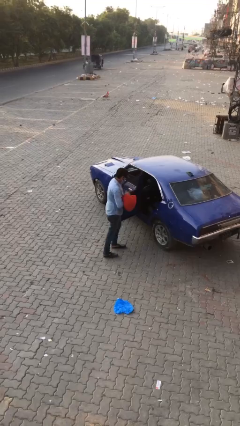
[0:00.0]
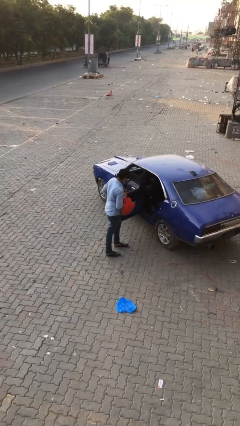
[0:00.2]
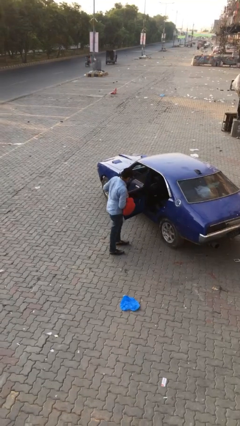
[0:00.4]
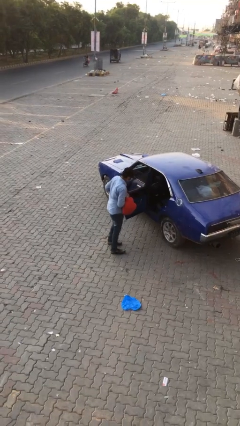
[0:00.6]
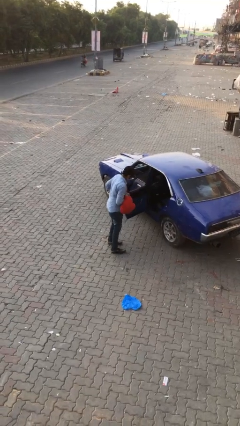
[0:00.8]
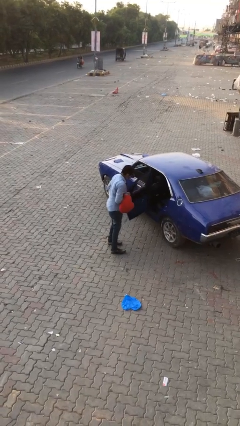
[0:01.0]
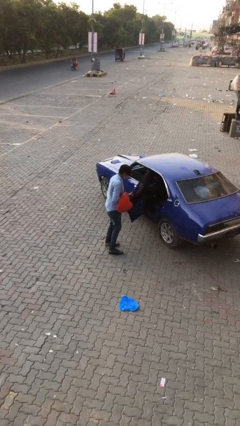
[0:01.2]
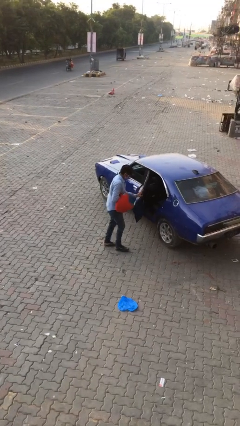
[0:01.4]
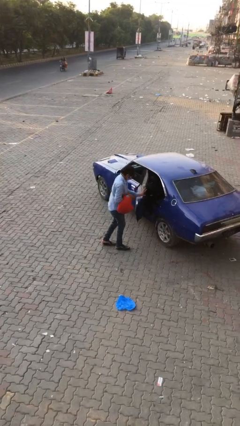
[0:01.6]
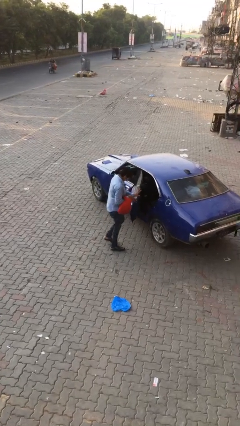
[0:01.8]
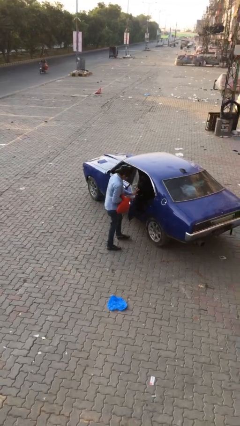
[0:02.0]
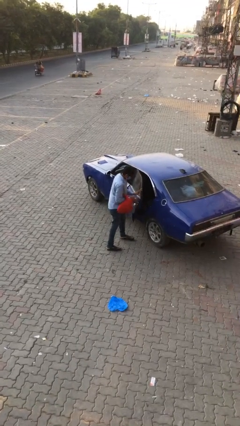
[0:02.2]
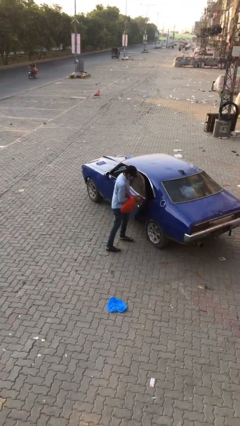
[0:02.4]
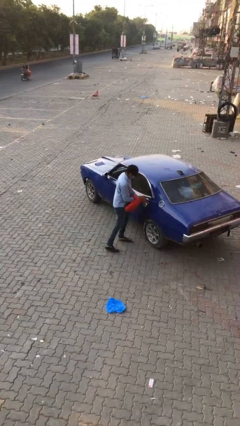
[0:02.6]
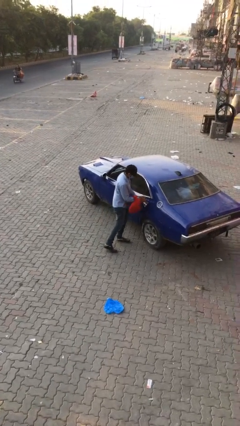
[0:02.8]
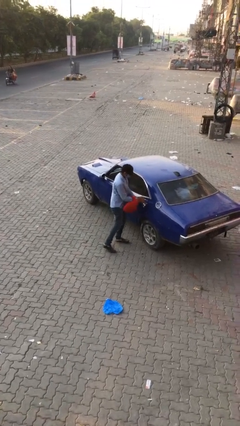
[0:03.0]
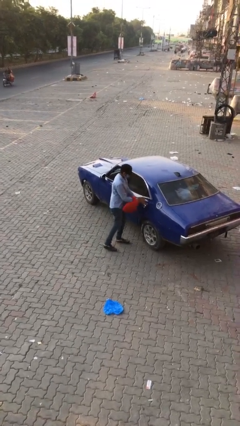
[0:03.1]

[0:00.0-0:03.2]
person closes car door

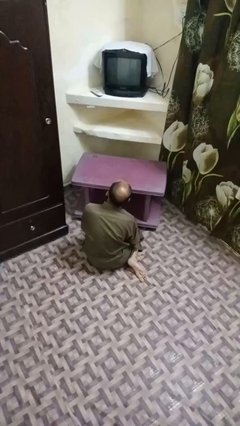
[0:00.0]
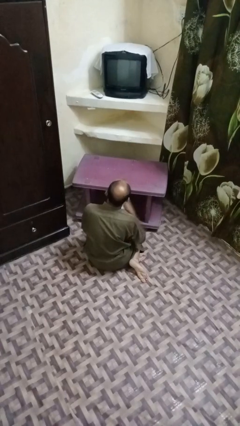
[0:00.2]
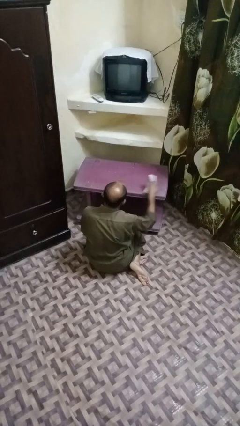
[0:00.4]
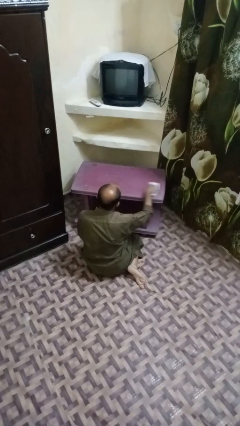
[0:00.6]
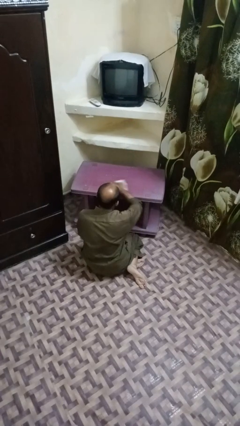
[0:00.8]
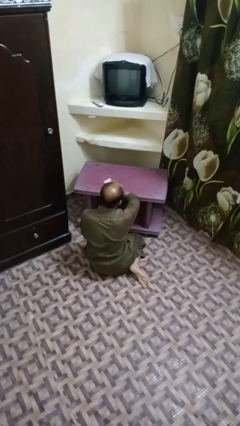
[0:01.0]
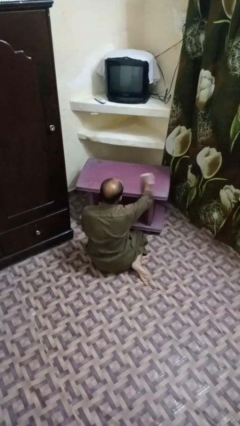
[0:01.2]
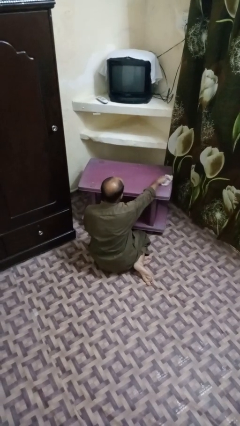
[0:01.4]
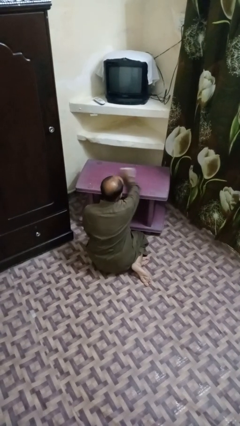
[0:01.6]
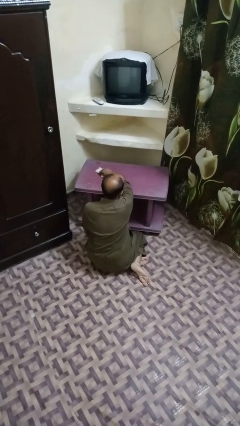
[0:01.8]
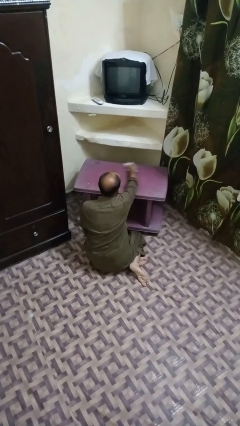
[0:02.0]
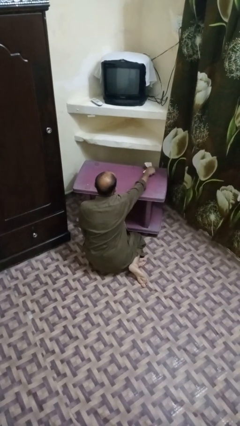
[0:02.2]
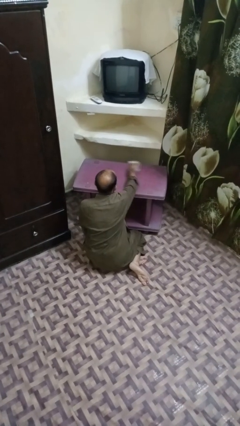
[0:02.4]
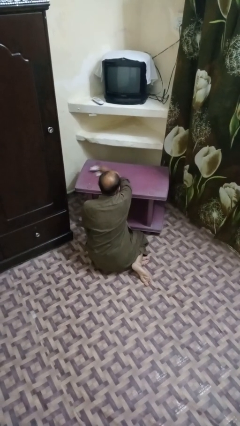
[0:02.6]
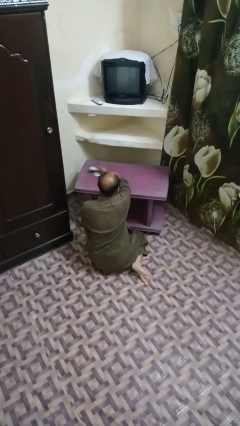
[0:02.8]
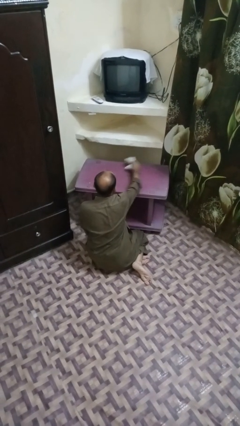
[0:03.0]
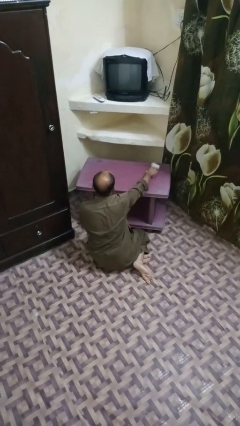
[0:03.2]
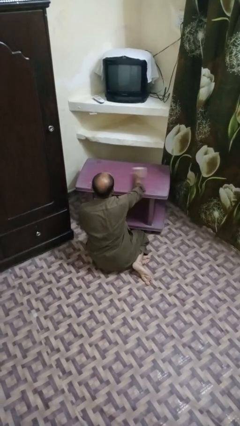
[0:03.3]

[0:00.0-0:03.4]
person cleans table with rag

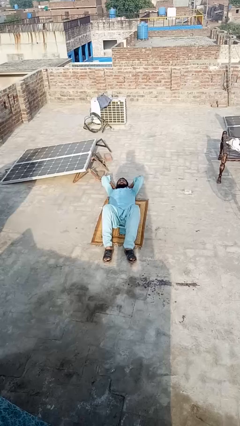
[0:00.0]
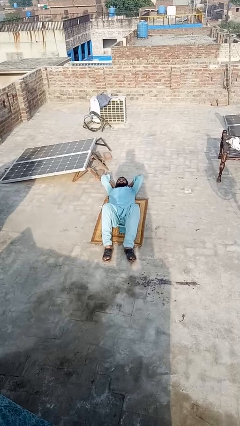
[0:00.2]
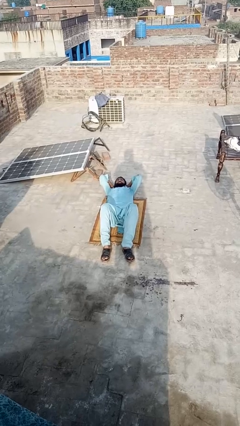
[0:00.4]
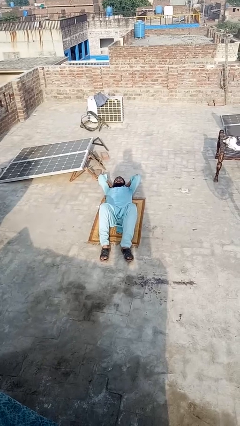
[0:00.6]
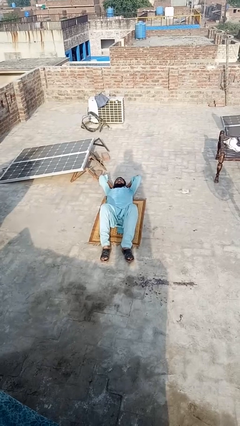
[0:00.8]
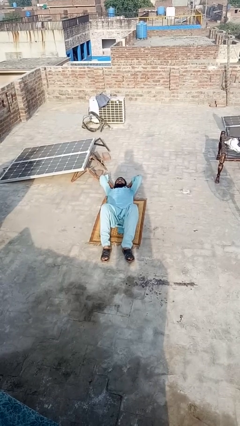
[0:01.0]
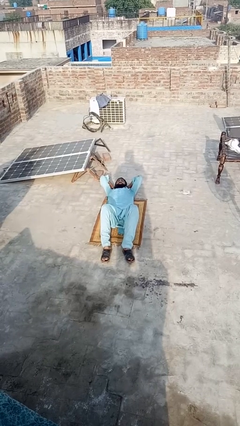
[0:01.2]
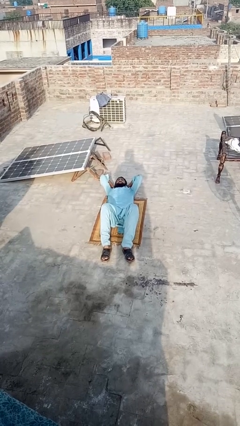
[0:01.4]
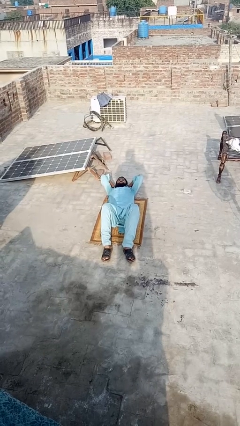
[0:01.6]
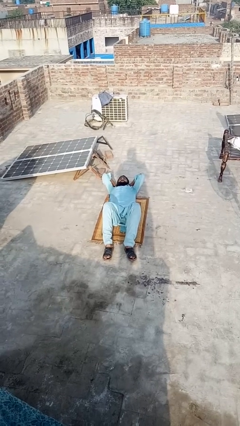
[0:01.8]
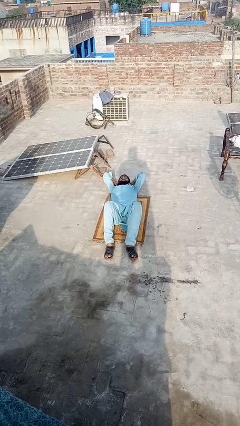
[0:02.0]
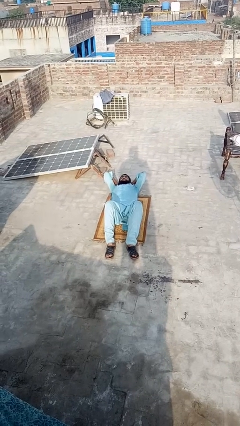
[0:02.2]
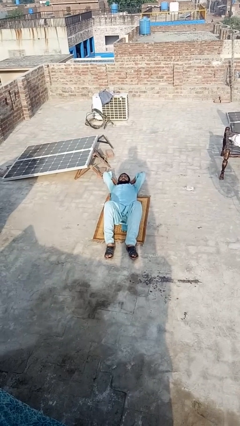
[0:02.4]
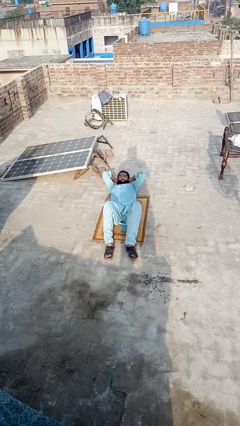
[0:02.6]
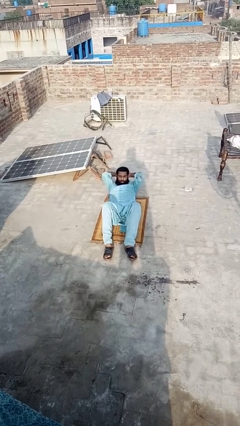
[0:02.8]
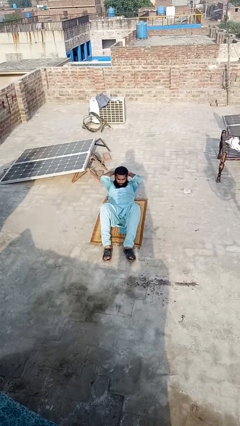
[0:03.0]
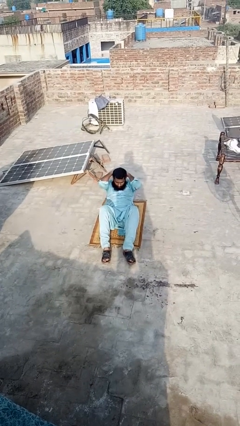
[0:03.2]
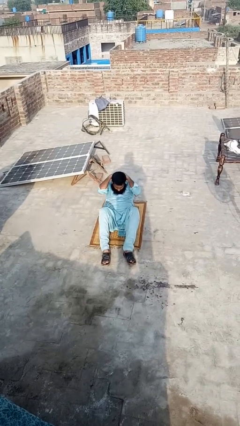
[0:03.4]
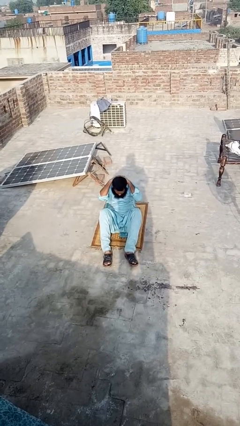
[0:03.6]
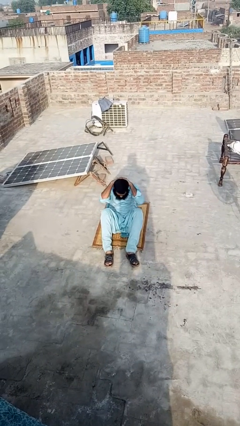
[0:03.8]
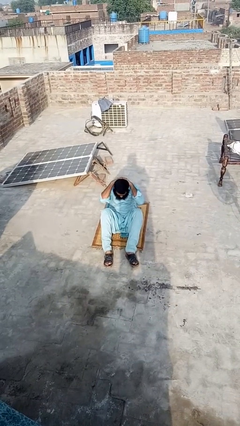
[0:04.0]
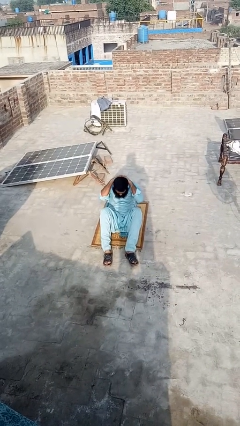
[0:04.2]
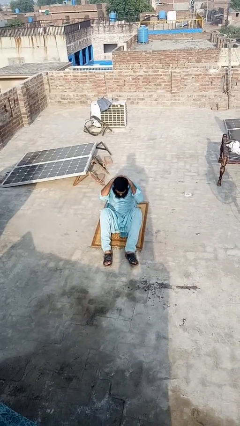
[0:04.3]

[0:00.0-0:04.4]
person exercises with situp

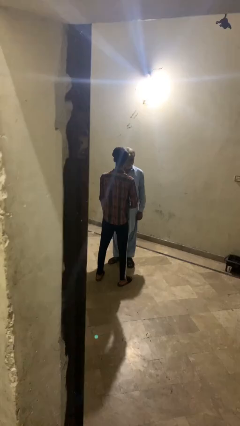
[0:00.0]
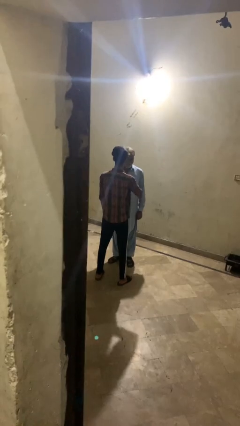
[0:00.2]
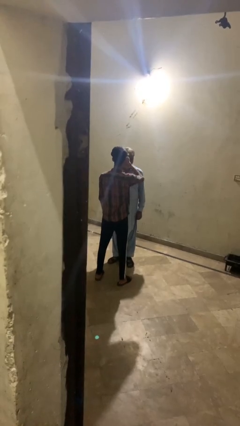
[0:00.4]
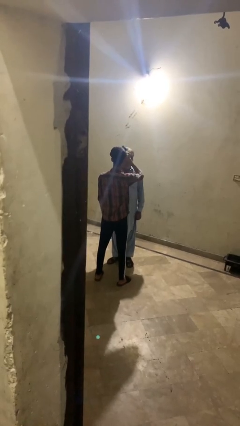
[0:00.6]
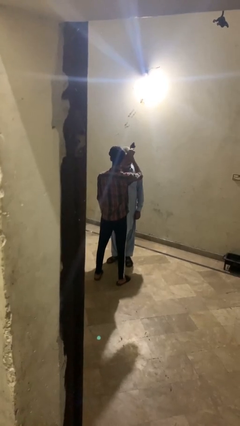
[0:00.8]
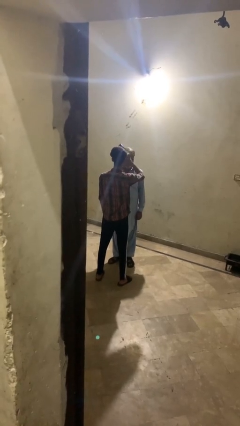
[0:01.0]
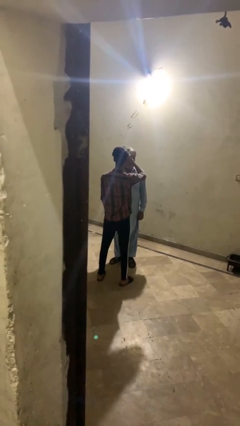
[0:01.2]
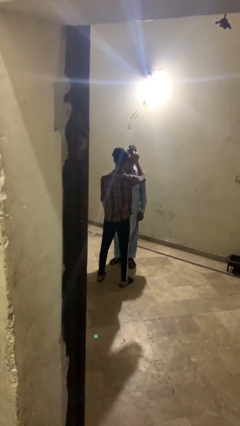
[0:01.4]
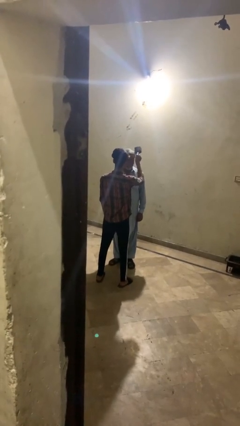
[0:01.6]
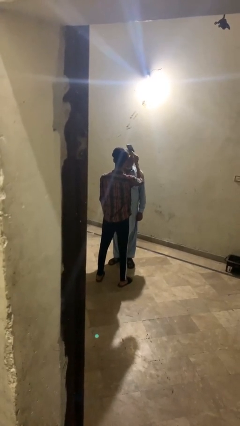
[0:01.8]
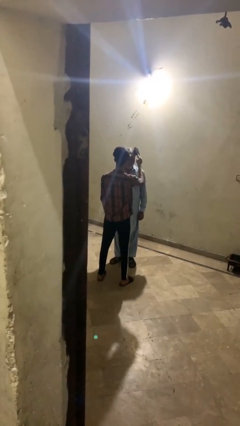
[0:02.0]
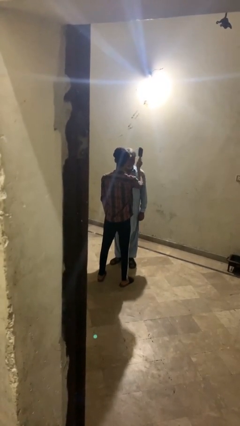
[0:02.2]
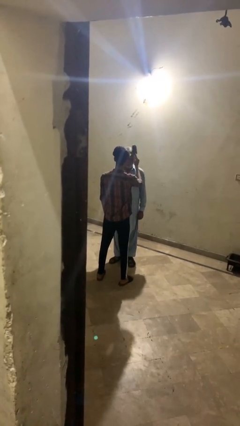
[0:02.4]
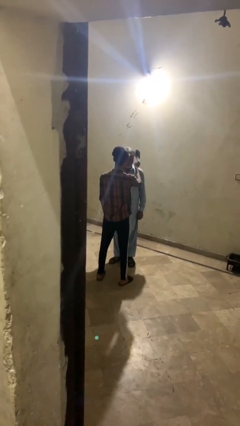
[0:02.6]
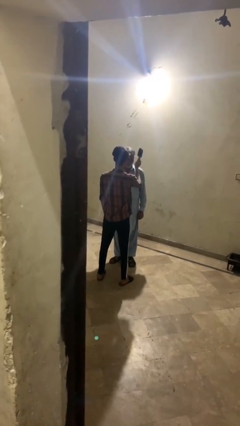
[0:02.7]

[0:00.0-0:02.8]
person brushes hair of person

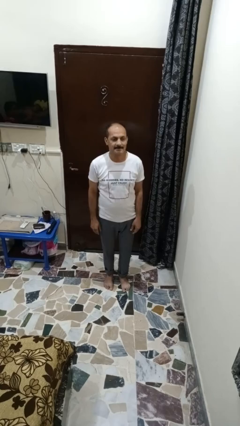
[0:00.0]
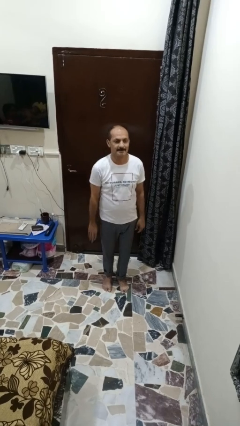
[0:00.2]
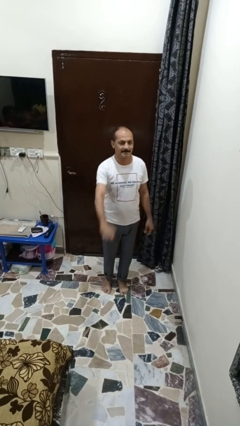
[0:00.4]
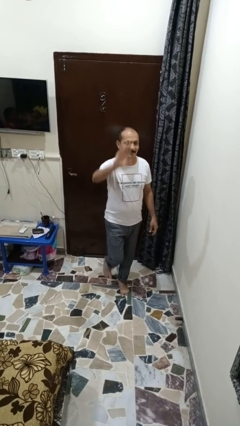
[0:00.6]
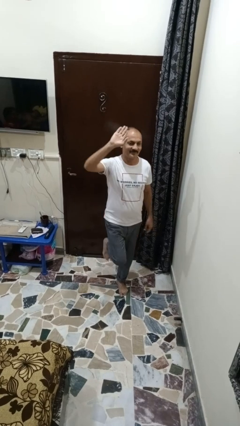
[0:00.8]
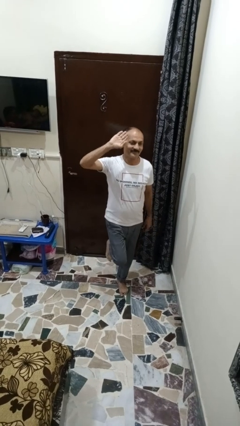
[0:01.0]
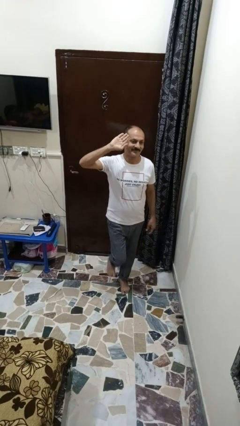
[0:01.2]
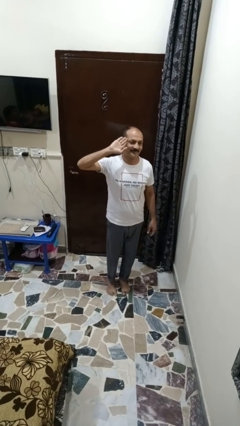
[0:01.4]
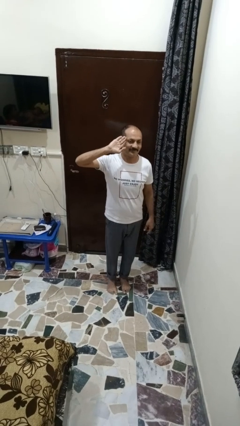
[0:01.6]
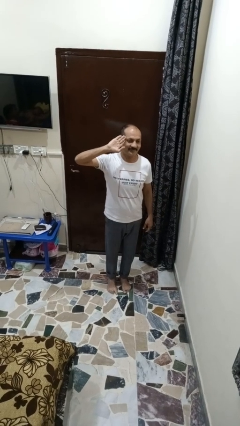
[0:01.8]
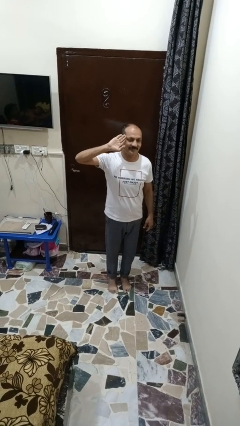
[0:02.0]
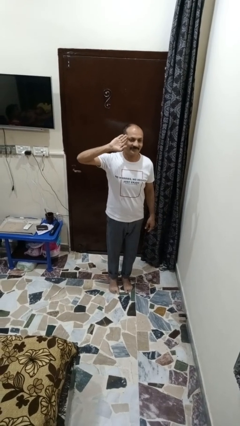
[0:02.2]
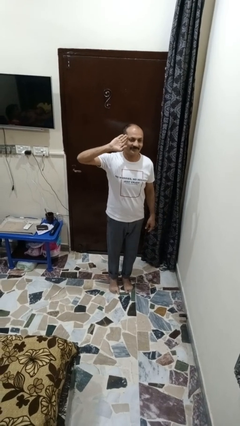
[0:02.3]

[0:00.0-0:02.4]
person salutes

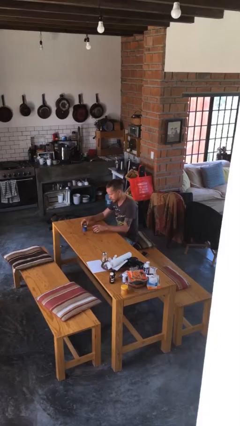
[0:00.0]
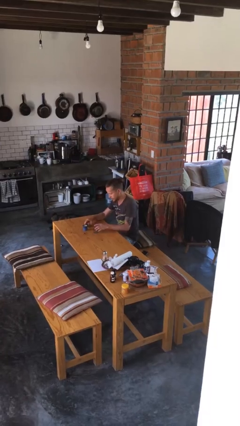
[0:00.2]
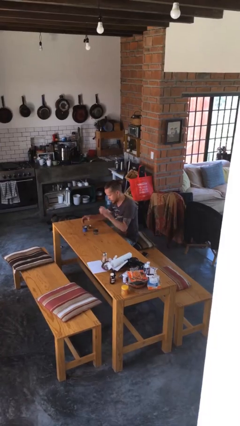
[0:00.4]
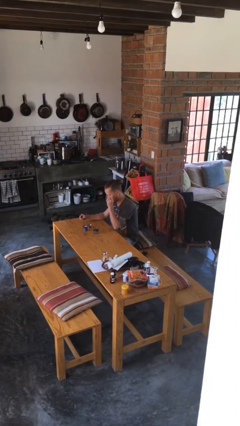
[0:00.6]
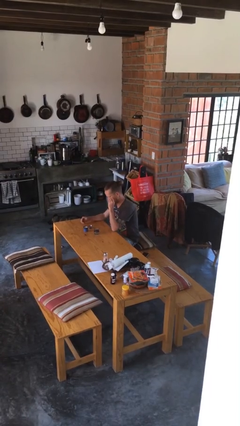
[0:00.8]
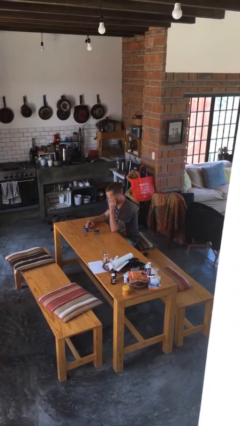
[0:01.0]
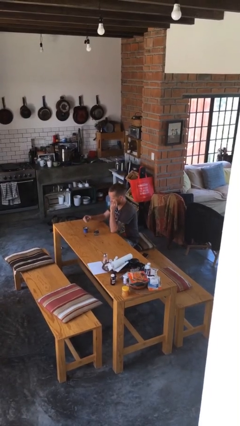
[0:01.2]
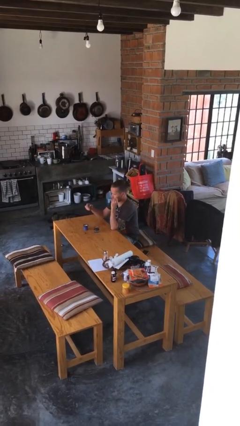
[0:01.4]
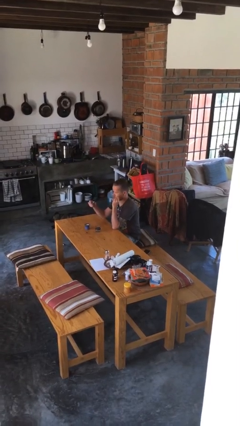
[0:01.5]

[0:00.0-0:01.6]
person picks up object from table
